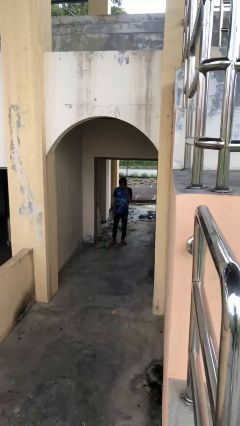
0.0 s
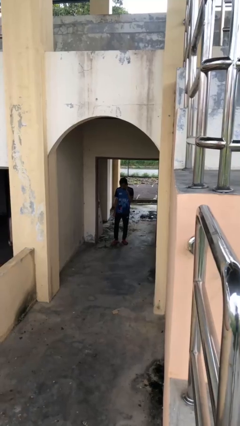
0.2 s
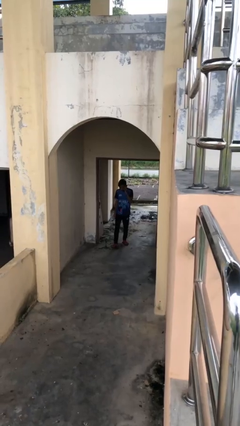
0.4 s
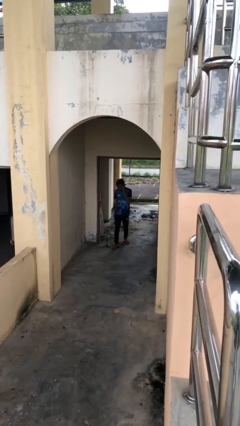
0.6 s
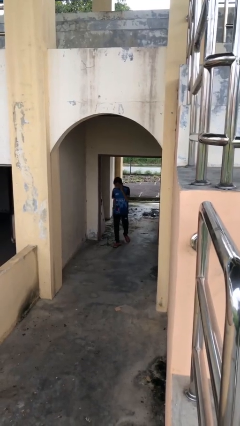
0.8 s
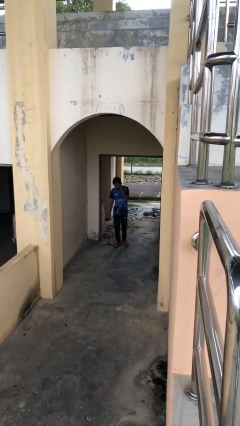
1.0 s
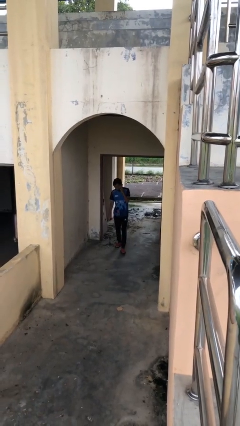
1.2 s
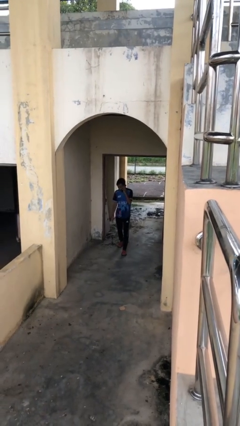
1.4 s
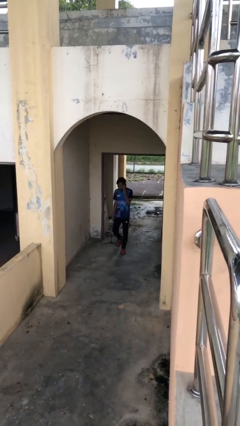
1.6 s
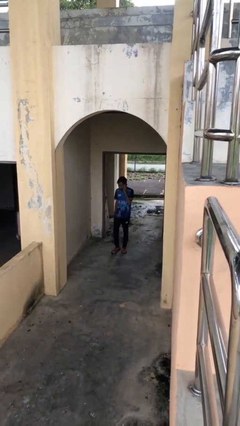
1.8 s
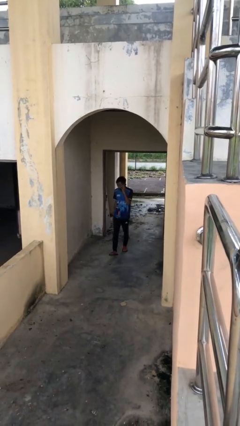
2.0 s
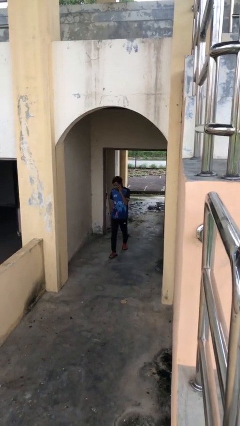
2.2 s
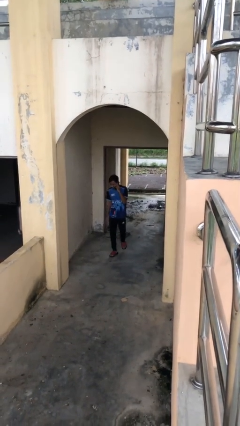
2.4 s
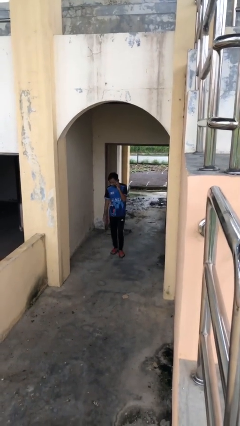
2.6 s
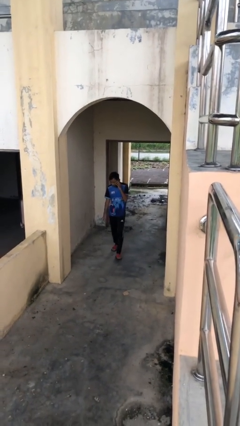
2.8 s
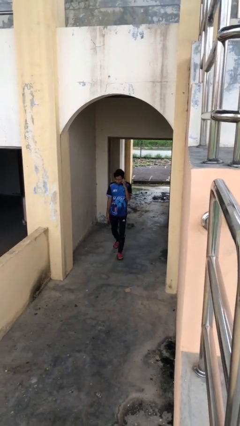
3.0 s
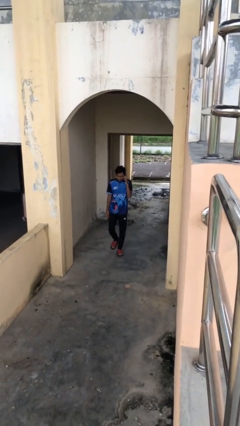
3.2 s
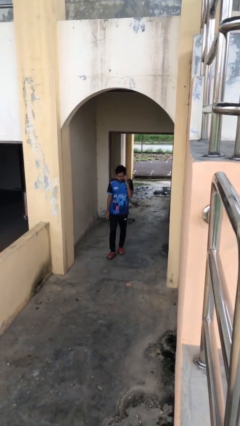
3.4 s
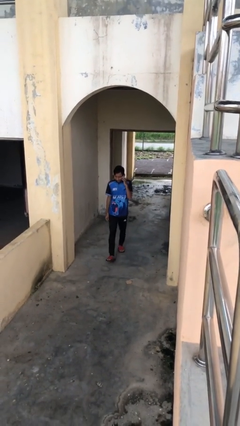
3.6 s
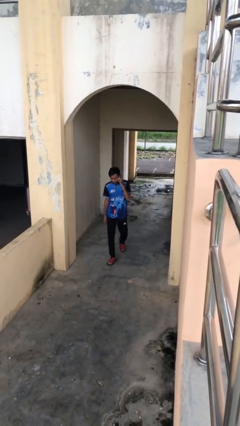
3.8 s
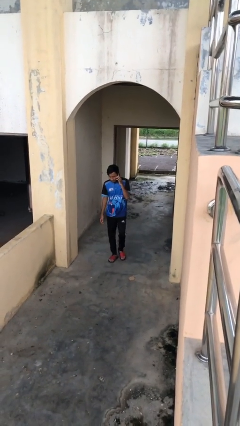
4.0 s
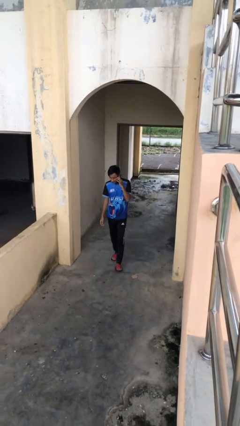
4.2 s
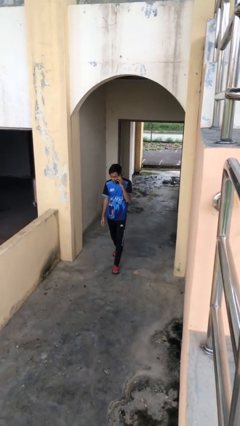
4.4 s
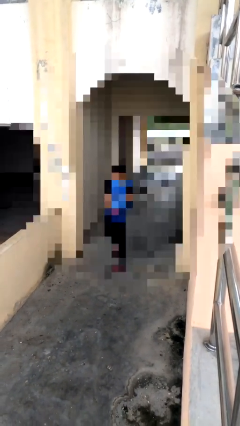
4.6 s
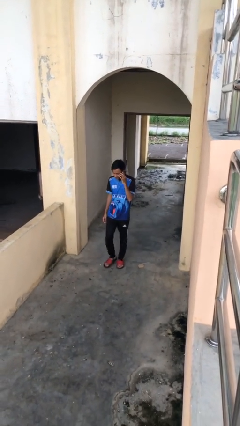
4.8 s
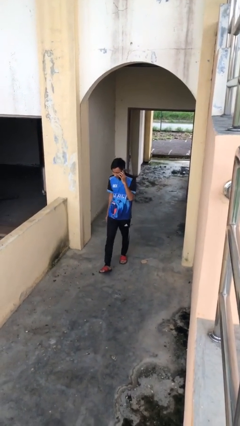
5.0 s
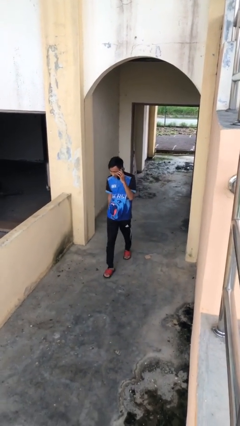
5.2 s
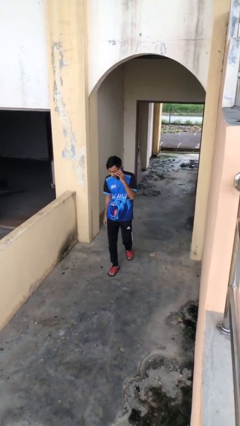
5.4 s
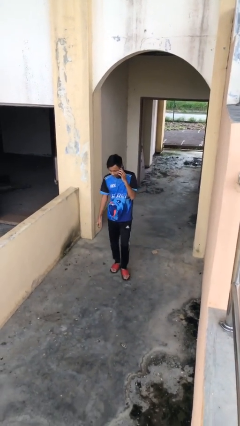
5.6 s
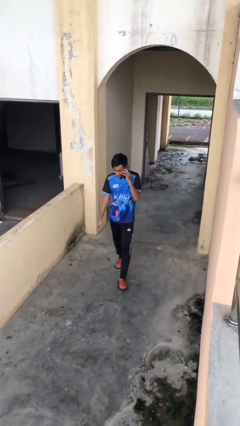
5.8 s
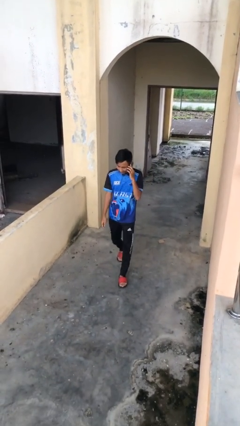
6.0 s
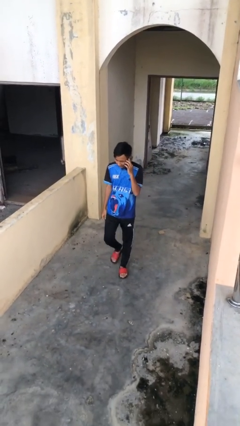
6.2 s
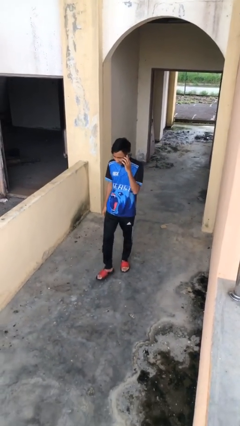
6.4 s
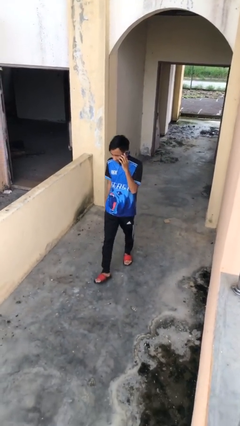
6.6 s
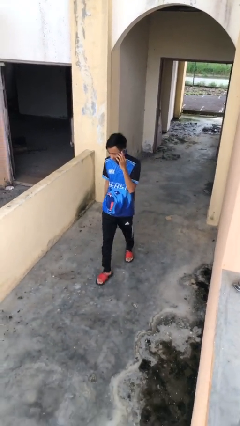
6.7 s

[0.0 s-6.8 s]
person enters scene through structure

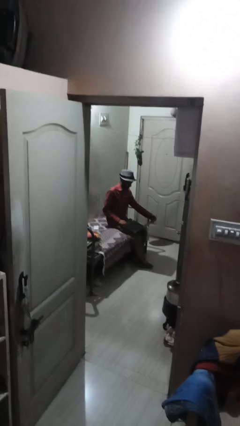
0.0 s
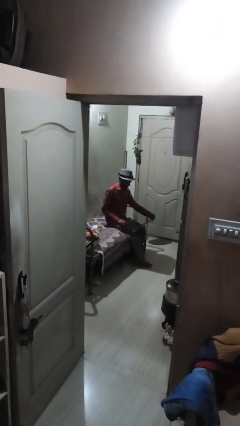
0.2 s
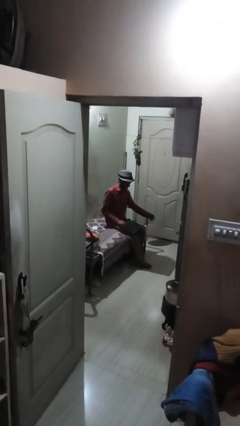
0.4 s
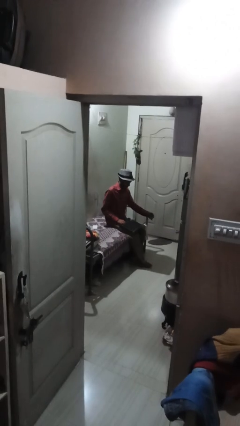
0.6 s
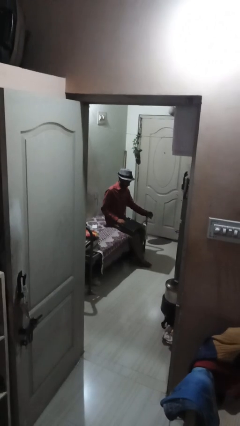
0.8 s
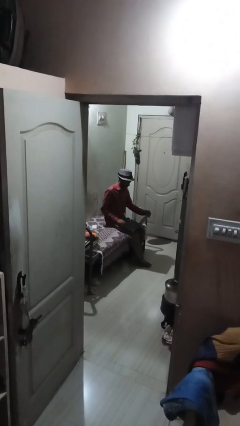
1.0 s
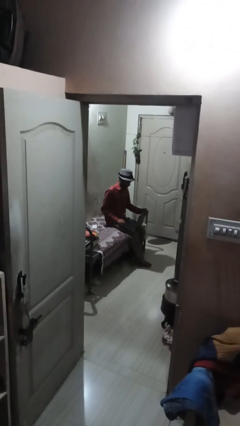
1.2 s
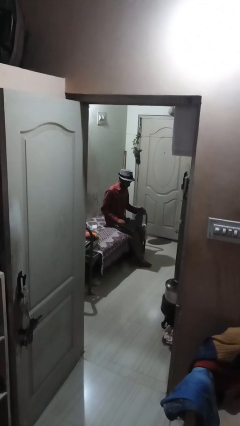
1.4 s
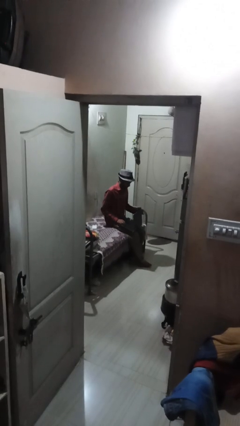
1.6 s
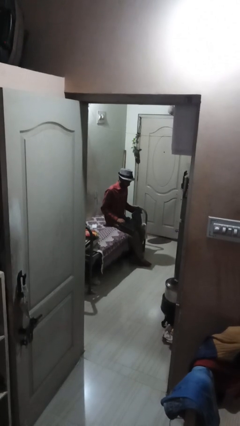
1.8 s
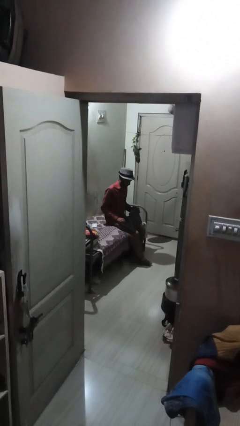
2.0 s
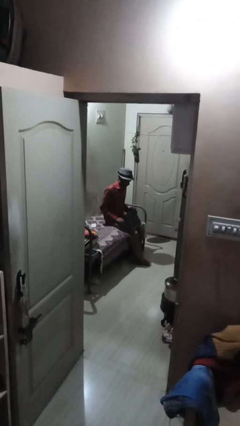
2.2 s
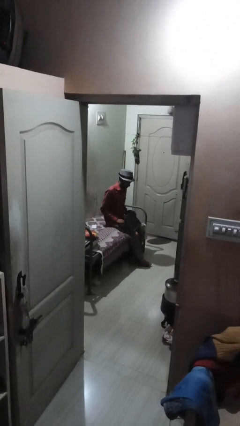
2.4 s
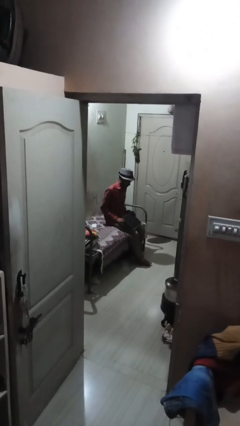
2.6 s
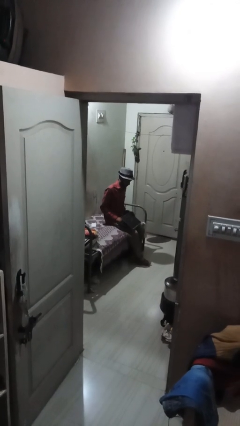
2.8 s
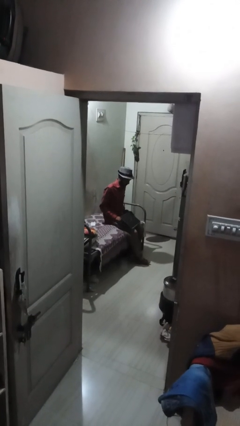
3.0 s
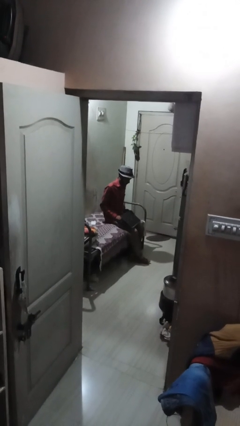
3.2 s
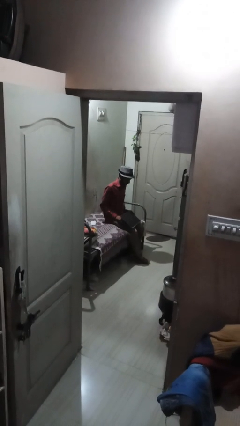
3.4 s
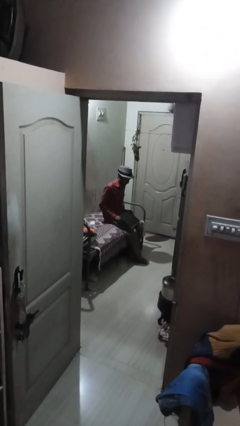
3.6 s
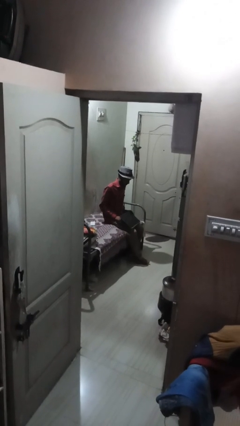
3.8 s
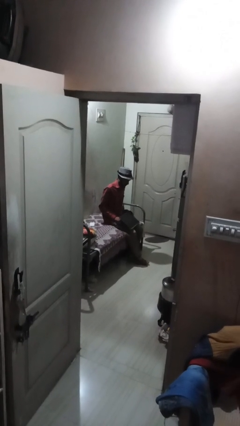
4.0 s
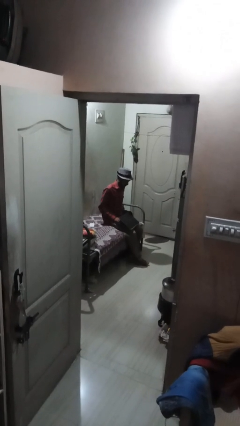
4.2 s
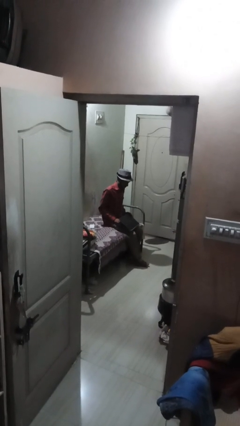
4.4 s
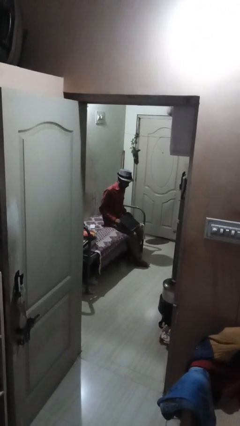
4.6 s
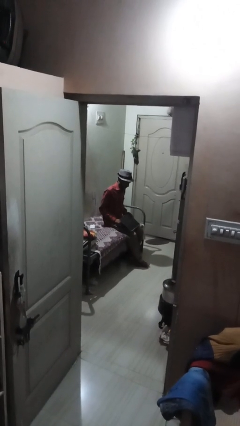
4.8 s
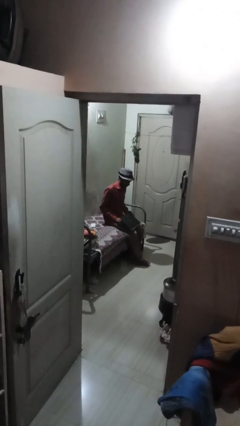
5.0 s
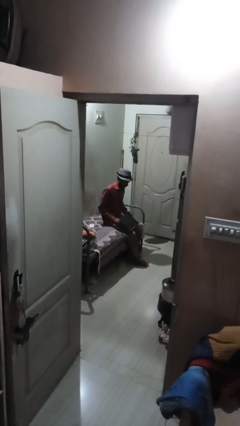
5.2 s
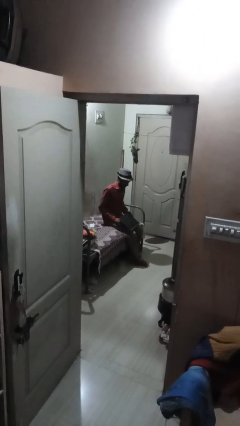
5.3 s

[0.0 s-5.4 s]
person closes laptop

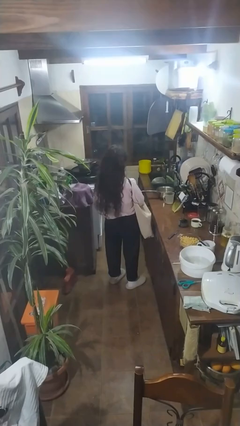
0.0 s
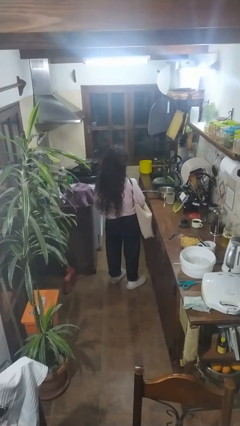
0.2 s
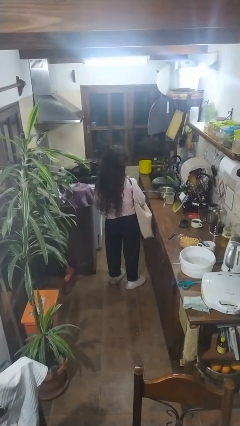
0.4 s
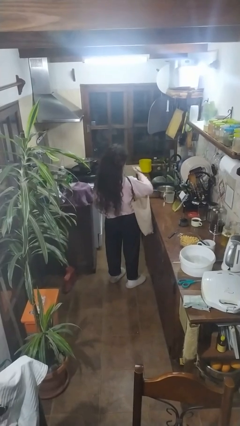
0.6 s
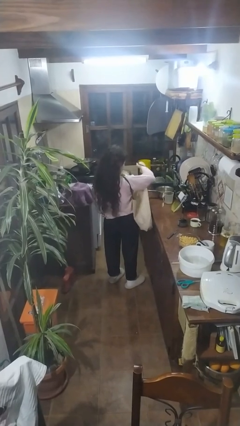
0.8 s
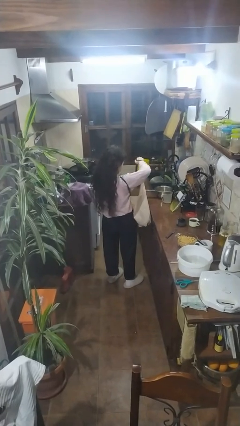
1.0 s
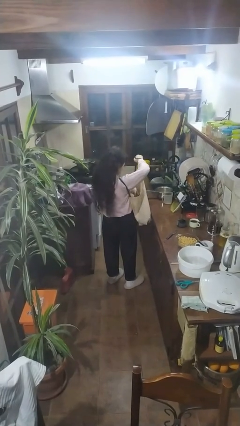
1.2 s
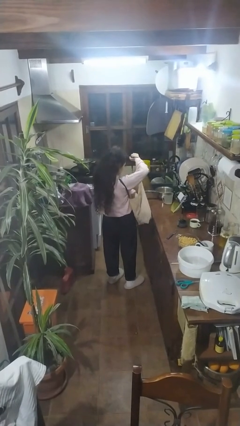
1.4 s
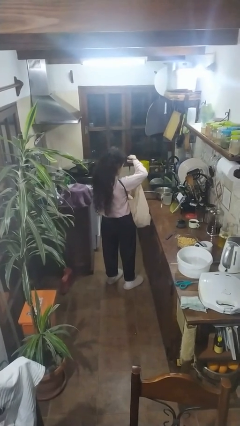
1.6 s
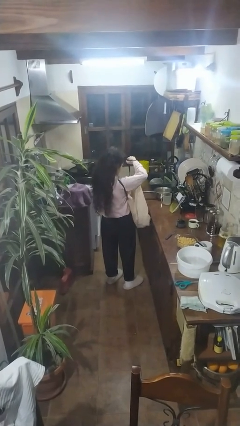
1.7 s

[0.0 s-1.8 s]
person puts object into bag

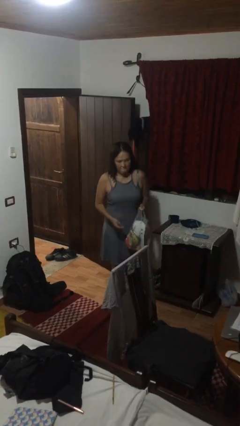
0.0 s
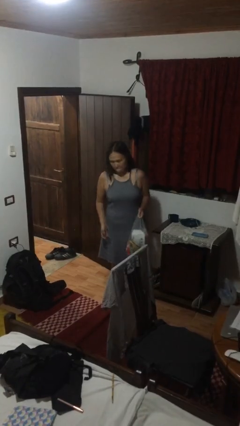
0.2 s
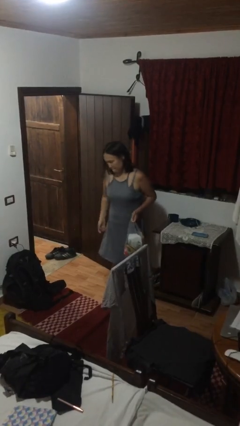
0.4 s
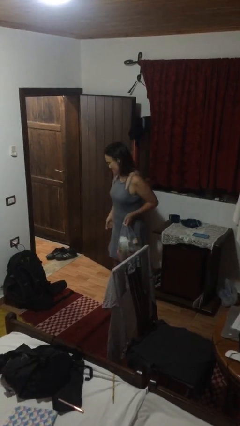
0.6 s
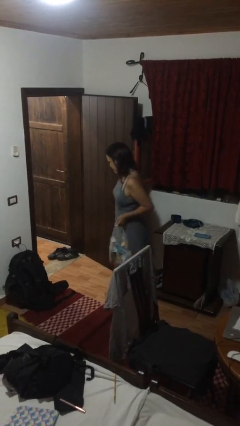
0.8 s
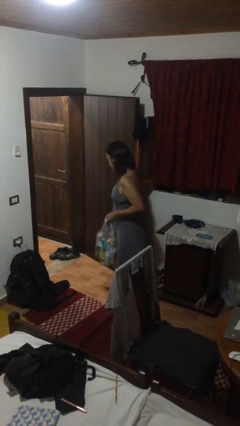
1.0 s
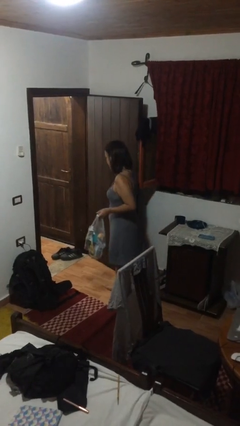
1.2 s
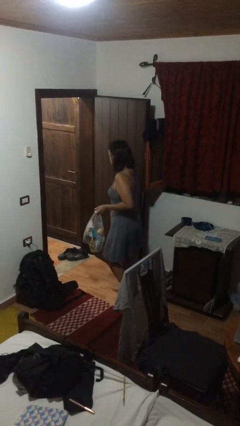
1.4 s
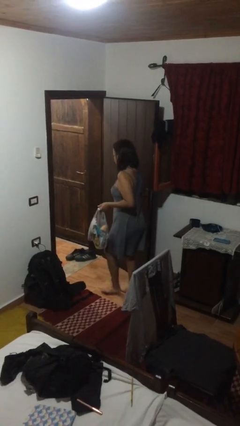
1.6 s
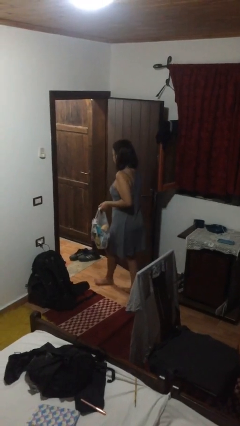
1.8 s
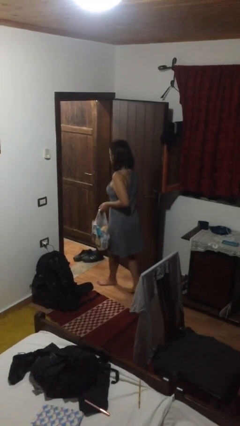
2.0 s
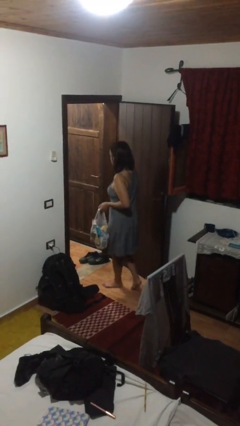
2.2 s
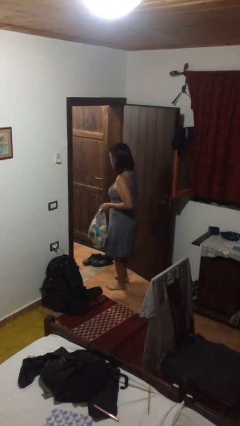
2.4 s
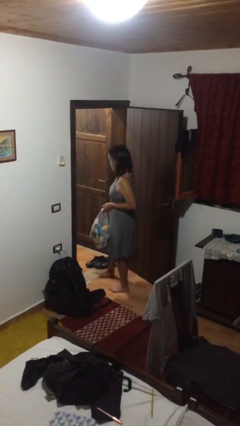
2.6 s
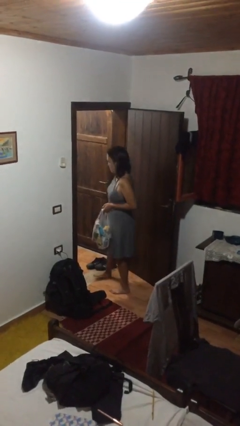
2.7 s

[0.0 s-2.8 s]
person carries groceries

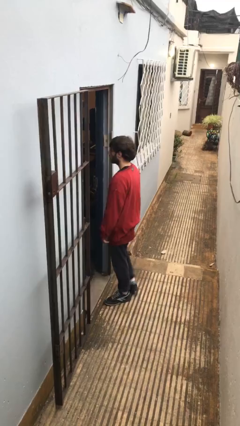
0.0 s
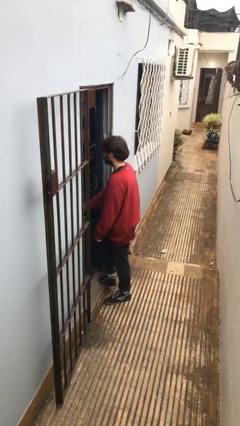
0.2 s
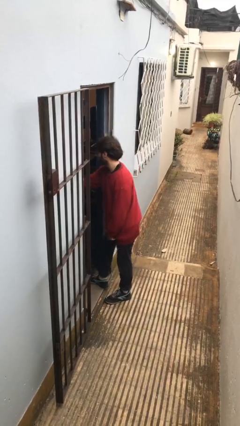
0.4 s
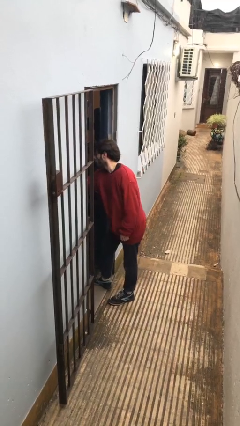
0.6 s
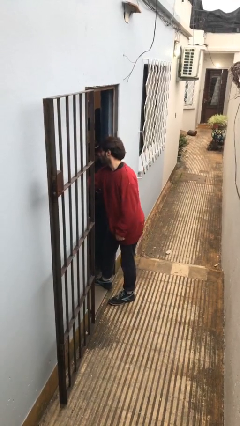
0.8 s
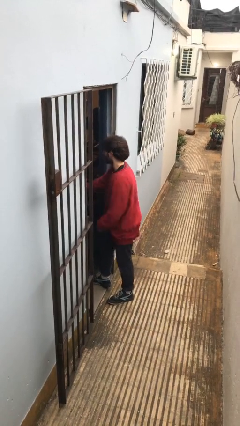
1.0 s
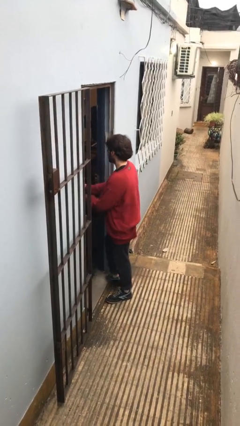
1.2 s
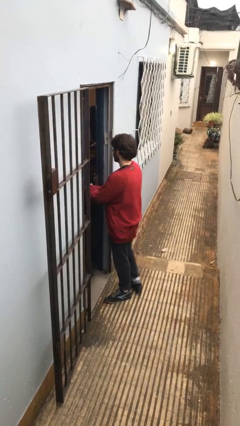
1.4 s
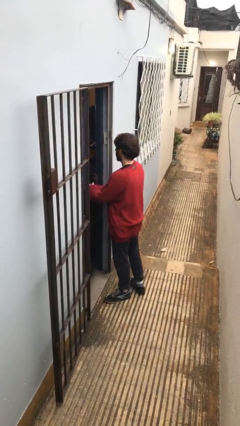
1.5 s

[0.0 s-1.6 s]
person closes facility door
